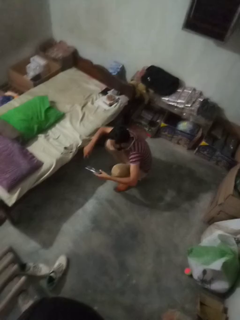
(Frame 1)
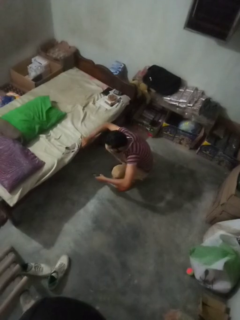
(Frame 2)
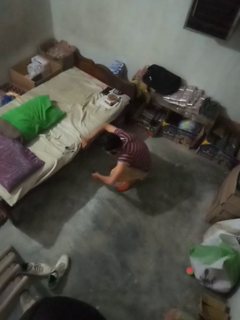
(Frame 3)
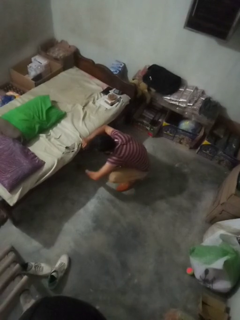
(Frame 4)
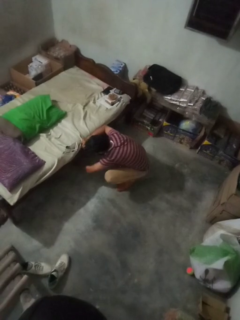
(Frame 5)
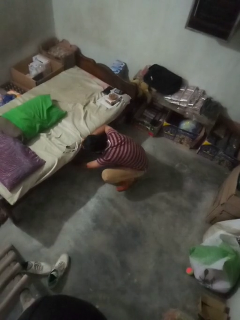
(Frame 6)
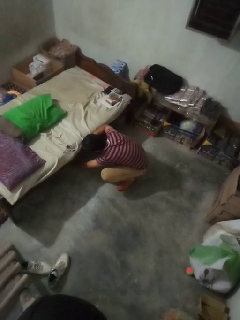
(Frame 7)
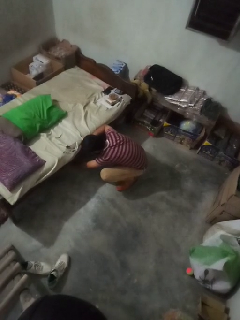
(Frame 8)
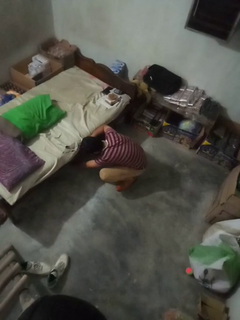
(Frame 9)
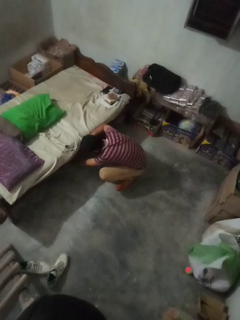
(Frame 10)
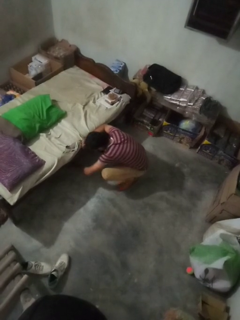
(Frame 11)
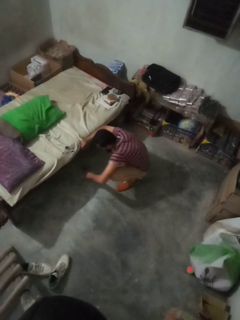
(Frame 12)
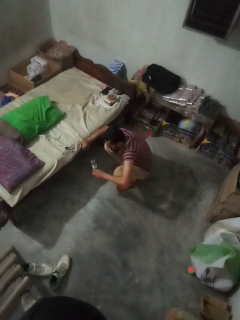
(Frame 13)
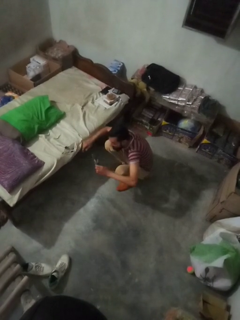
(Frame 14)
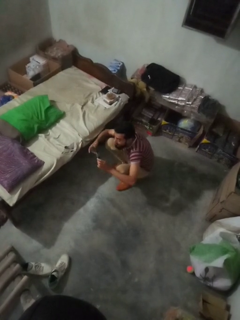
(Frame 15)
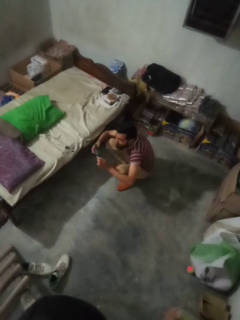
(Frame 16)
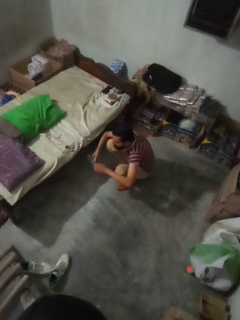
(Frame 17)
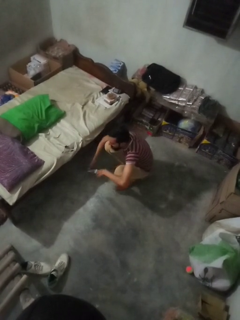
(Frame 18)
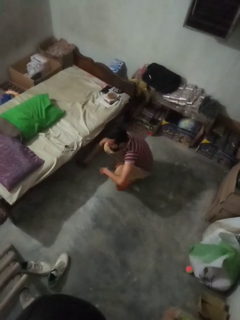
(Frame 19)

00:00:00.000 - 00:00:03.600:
person searches under couch

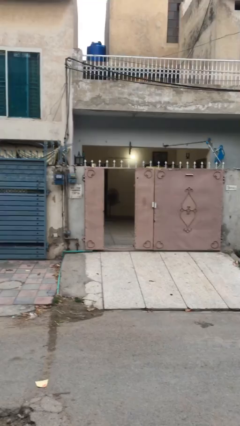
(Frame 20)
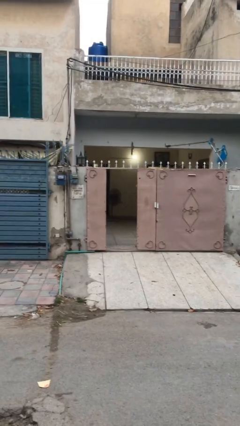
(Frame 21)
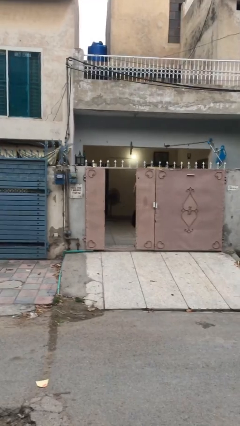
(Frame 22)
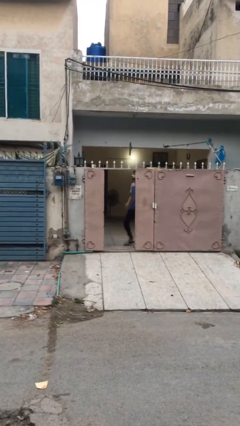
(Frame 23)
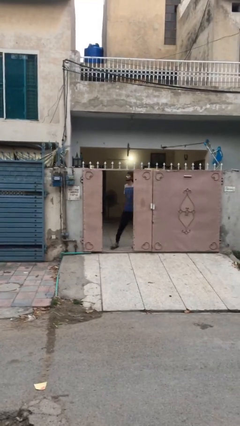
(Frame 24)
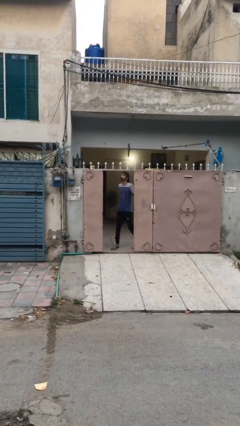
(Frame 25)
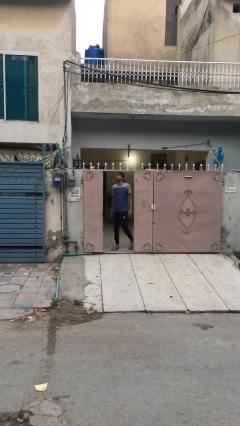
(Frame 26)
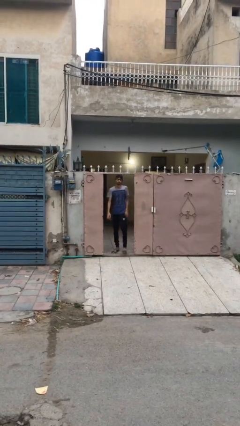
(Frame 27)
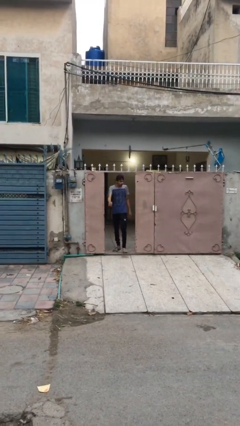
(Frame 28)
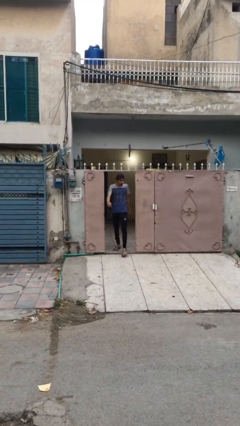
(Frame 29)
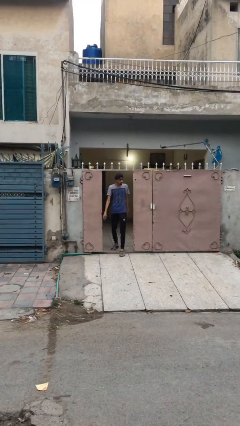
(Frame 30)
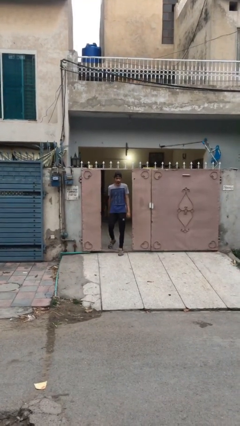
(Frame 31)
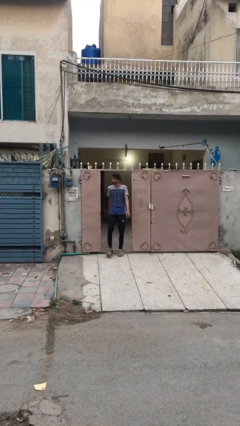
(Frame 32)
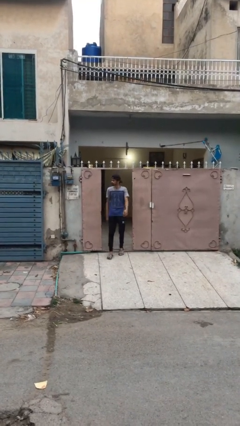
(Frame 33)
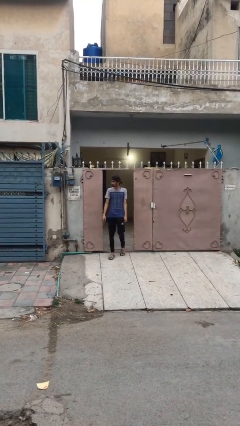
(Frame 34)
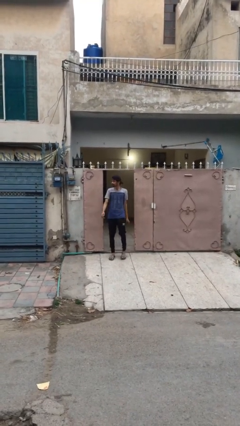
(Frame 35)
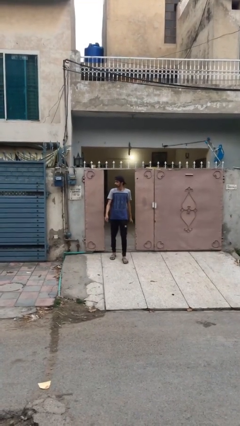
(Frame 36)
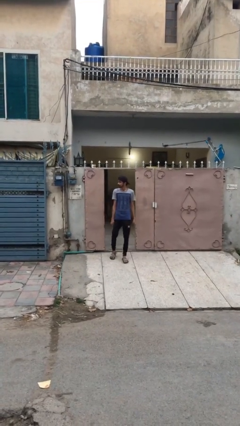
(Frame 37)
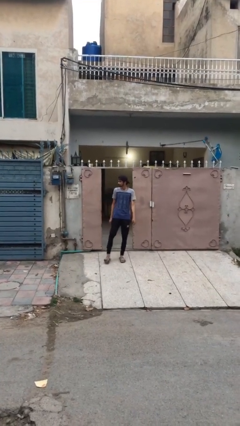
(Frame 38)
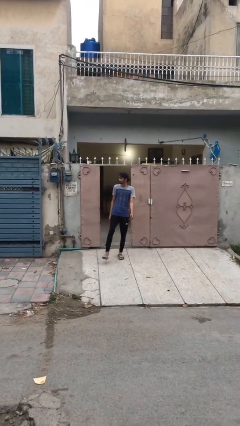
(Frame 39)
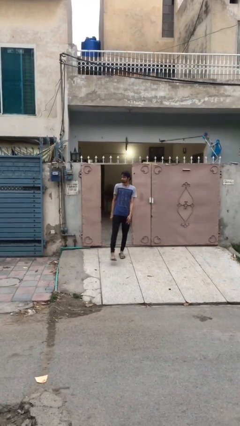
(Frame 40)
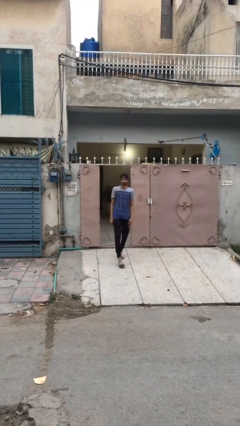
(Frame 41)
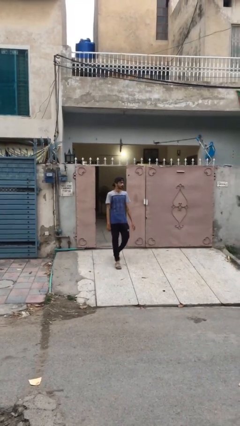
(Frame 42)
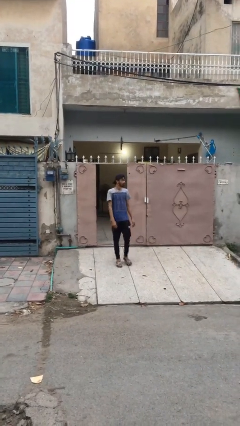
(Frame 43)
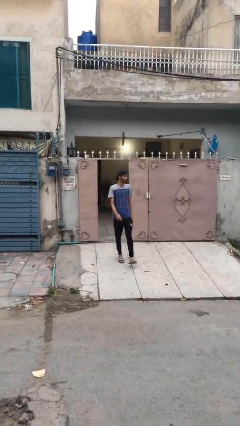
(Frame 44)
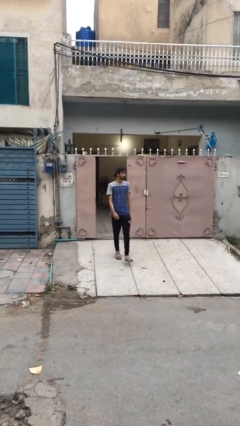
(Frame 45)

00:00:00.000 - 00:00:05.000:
person enters scene through structure

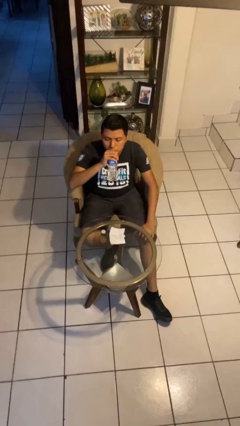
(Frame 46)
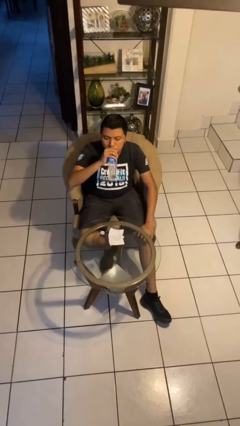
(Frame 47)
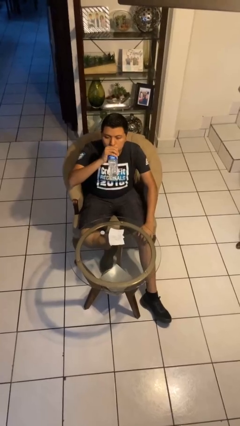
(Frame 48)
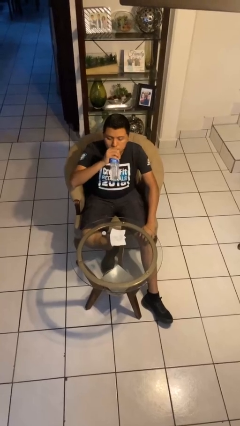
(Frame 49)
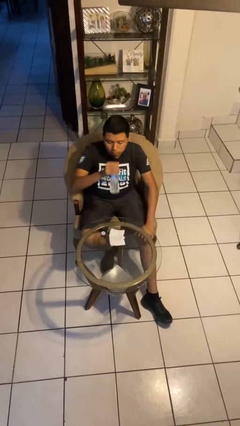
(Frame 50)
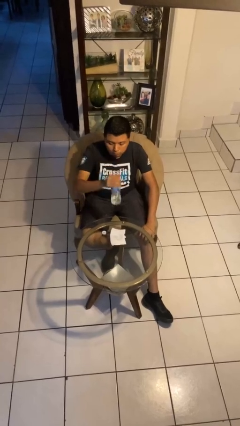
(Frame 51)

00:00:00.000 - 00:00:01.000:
person drinks from bottle

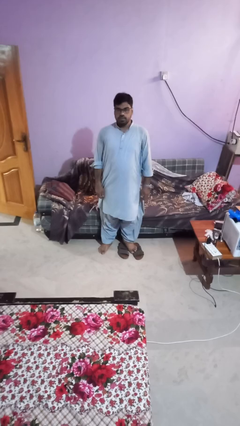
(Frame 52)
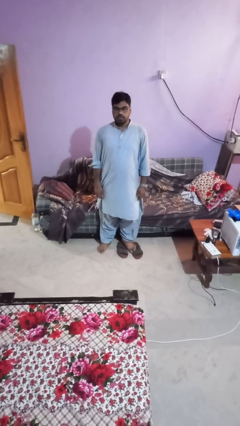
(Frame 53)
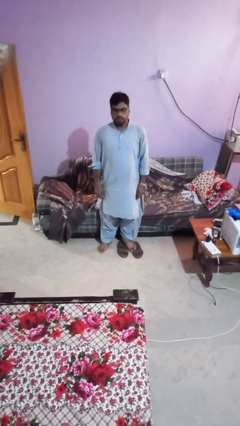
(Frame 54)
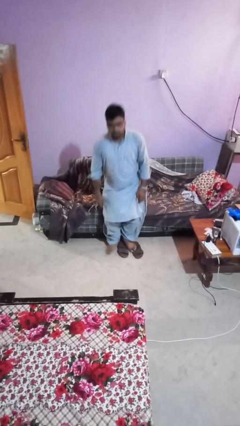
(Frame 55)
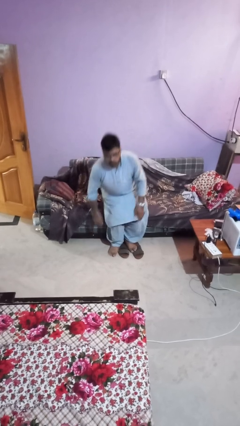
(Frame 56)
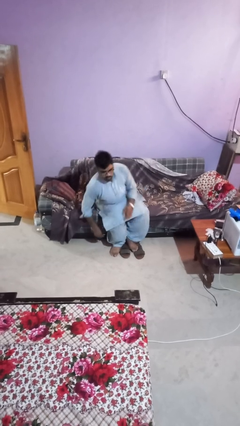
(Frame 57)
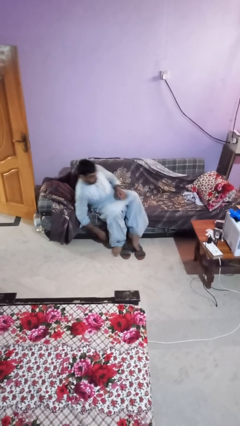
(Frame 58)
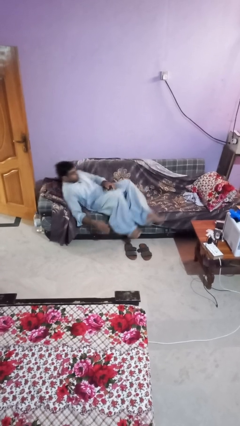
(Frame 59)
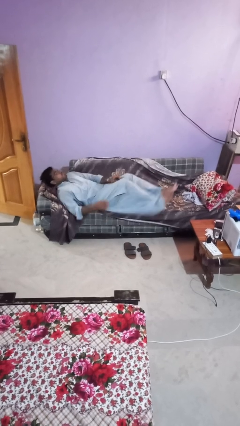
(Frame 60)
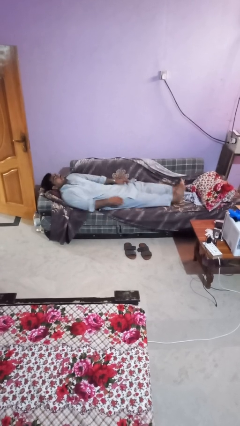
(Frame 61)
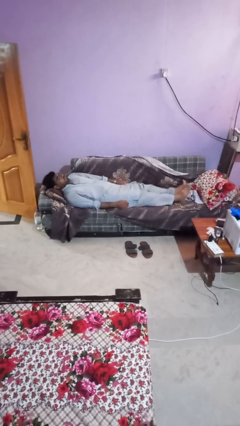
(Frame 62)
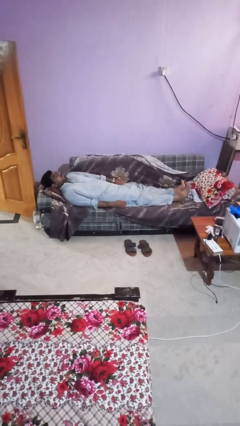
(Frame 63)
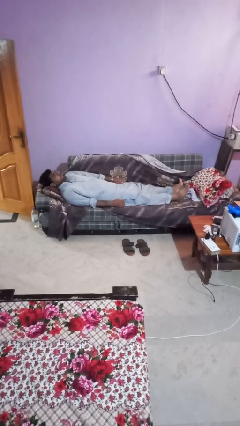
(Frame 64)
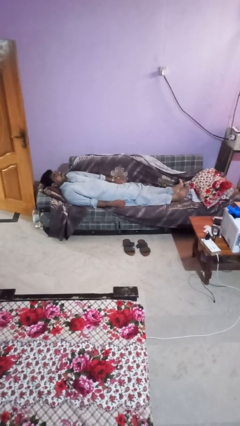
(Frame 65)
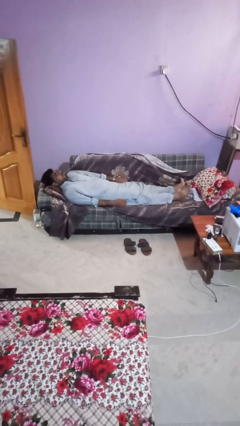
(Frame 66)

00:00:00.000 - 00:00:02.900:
person lies down on couch

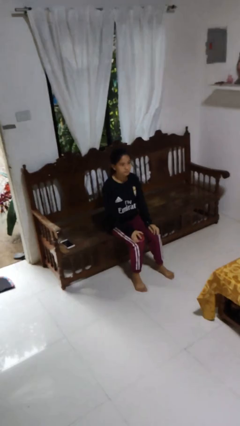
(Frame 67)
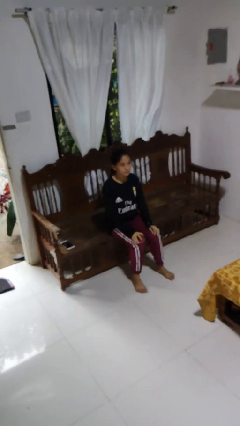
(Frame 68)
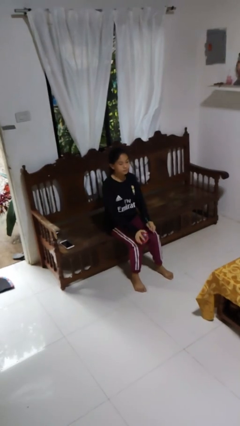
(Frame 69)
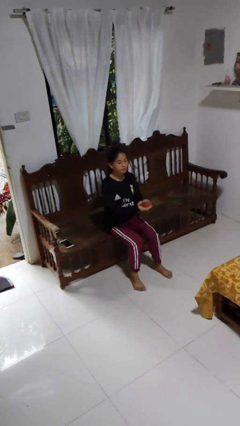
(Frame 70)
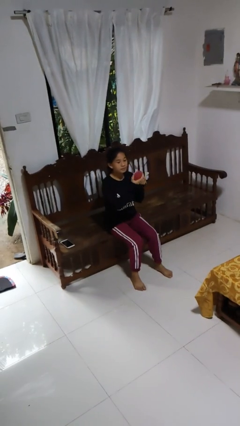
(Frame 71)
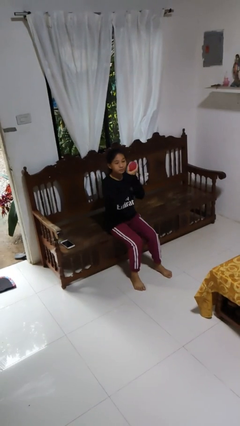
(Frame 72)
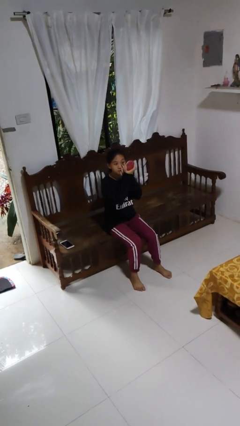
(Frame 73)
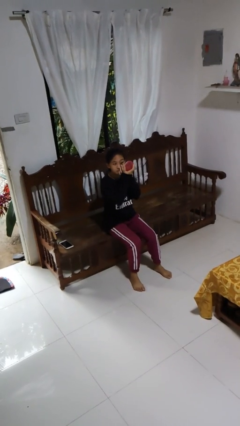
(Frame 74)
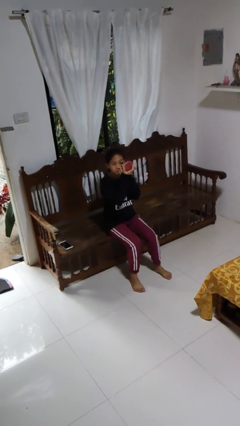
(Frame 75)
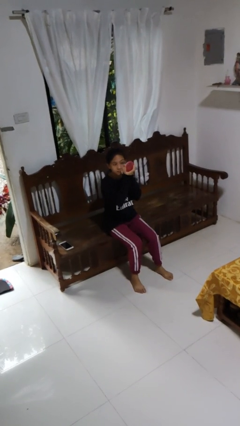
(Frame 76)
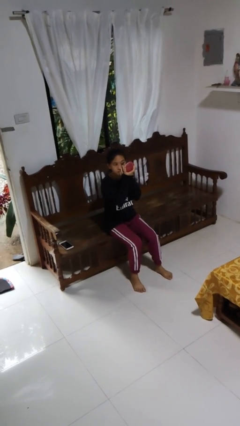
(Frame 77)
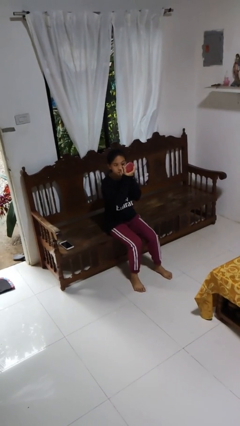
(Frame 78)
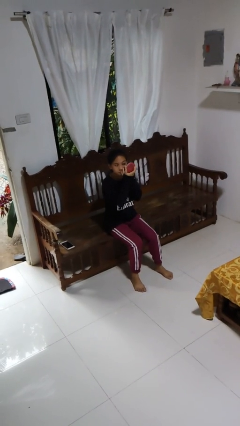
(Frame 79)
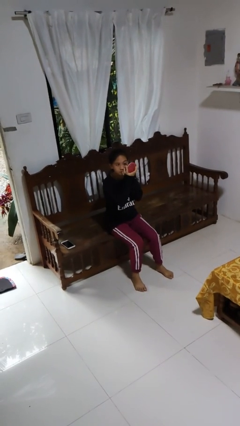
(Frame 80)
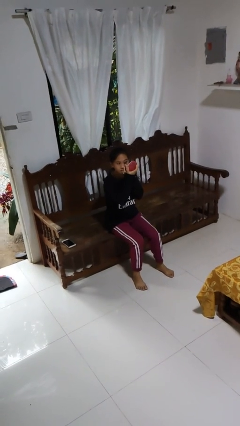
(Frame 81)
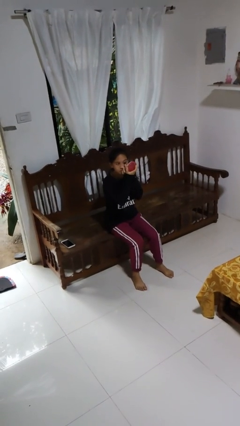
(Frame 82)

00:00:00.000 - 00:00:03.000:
person applies eye makeup

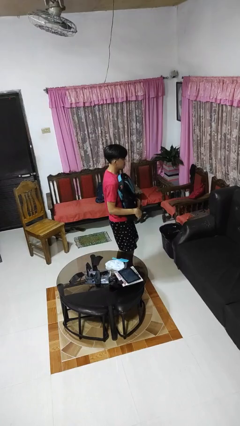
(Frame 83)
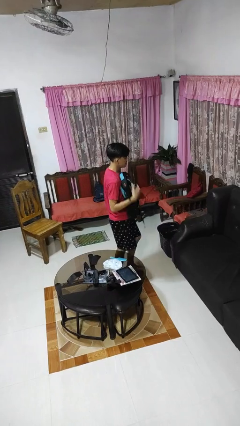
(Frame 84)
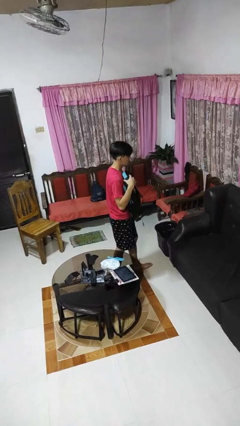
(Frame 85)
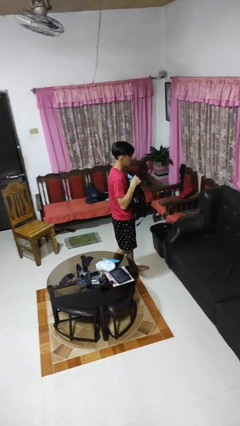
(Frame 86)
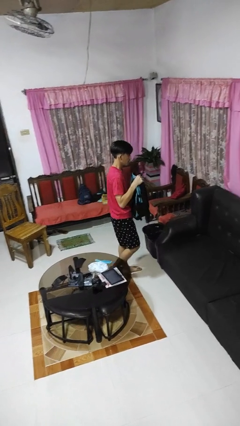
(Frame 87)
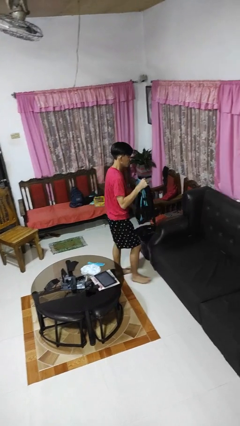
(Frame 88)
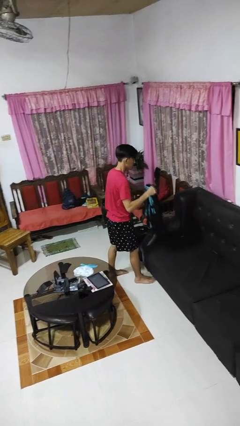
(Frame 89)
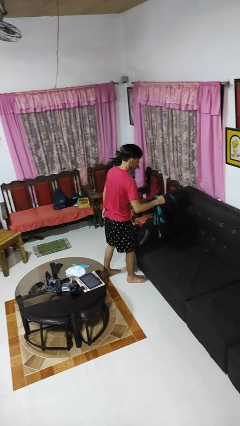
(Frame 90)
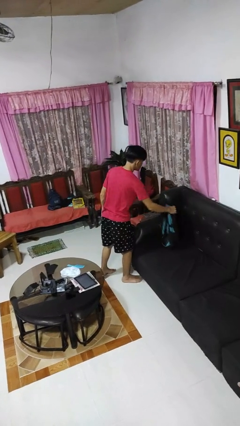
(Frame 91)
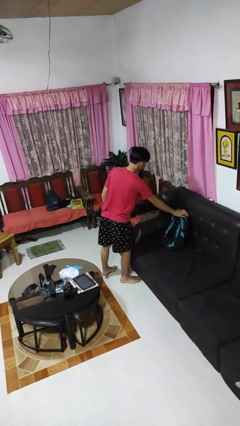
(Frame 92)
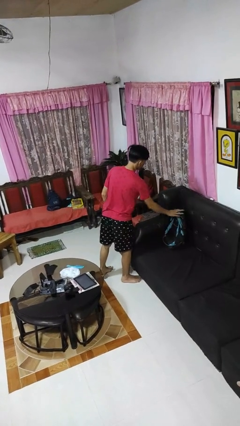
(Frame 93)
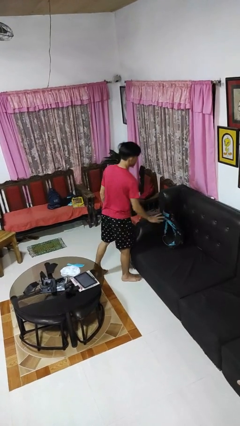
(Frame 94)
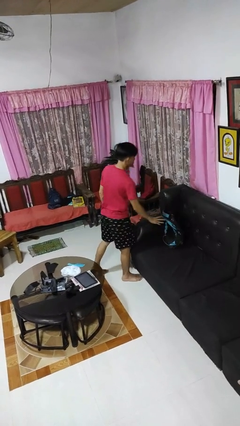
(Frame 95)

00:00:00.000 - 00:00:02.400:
person puts down object on couch

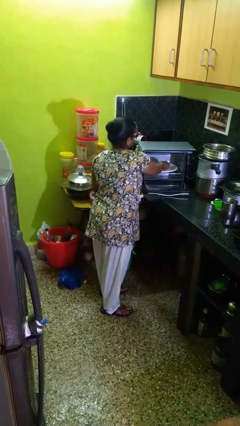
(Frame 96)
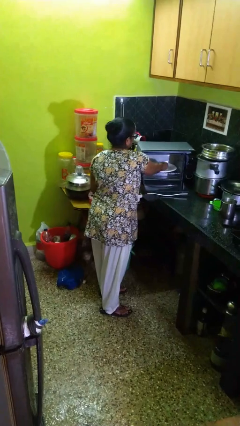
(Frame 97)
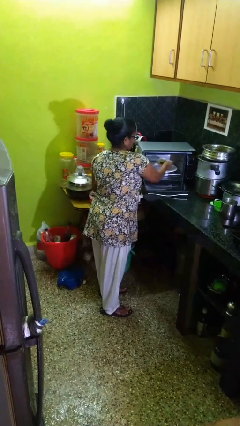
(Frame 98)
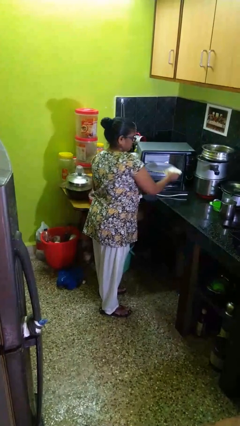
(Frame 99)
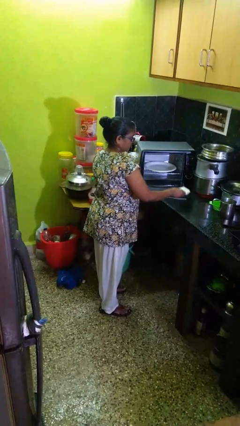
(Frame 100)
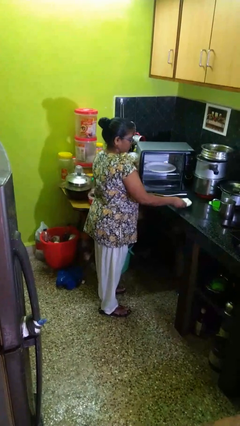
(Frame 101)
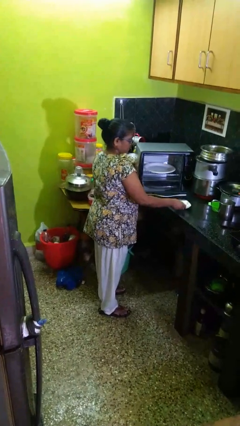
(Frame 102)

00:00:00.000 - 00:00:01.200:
person takes object from microwave
